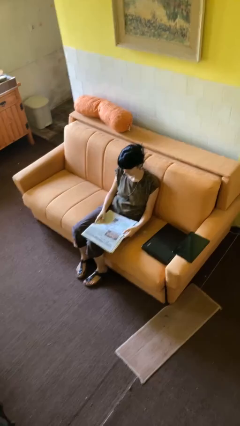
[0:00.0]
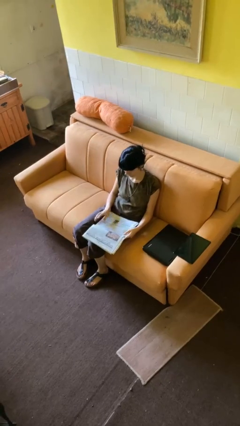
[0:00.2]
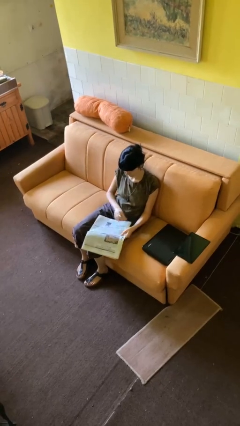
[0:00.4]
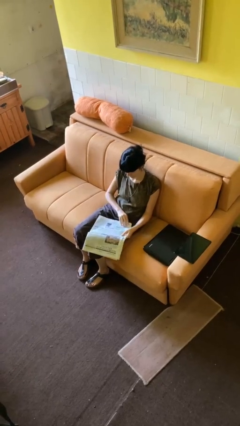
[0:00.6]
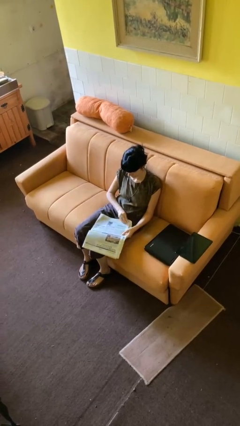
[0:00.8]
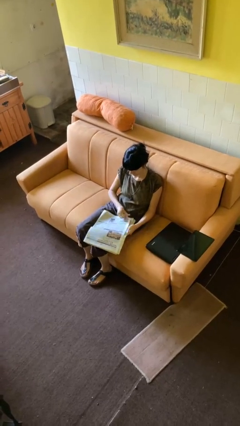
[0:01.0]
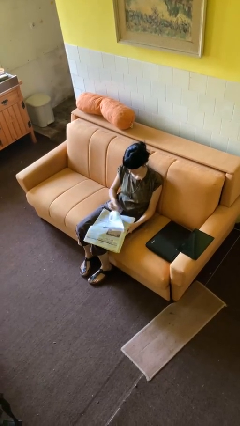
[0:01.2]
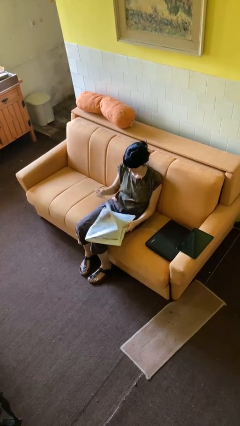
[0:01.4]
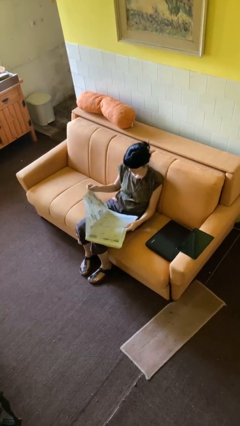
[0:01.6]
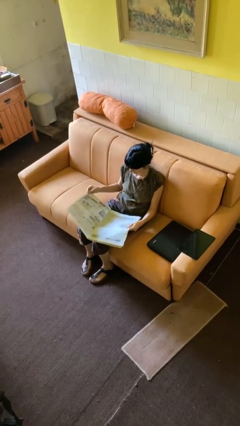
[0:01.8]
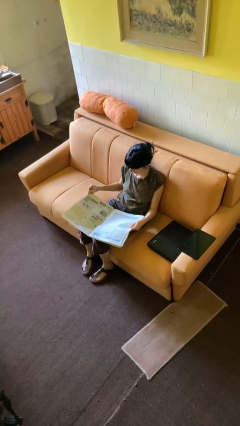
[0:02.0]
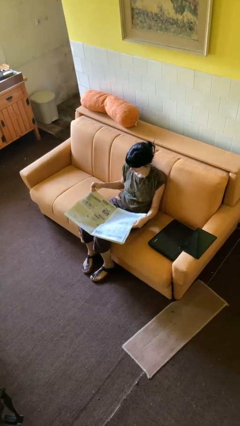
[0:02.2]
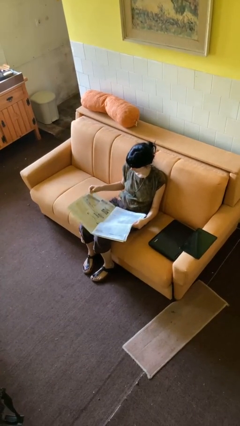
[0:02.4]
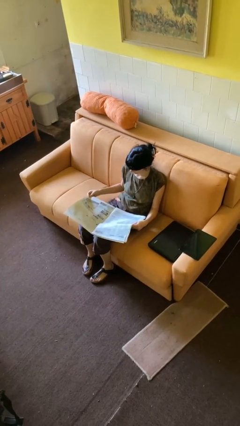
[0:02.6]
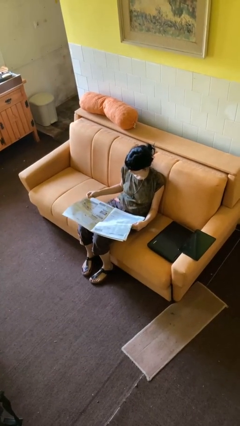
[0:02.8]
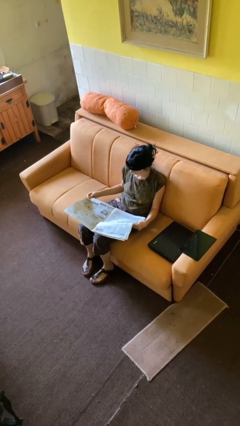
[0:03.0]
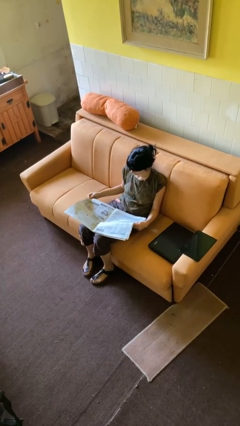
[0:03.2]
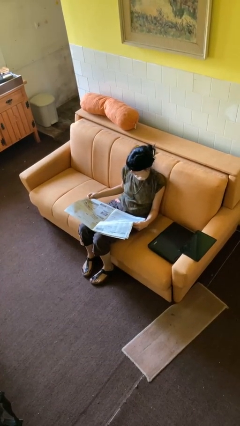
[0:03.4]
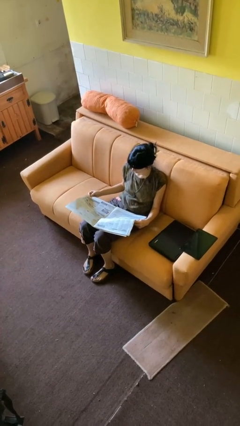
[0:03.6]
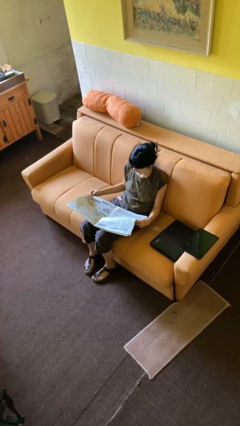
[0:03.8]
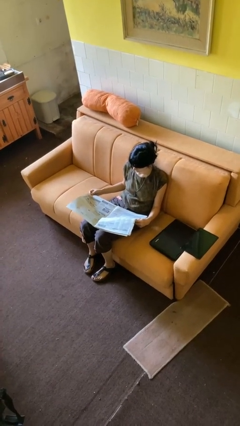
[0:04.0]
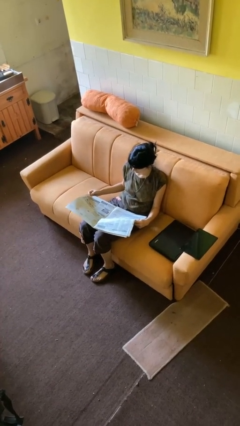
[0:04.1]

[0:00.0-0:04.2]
person reads newspaper

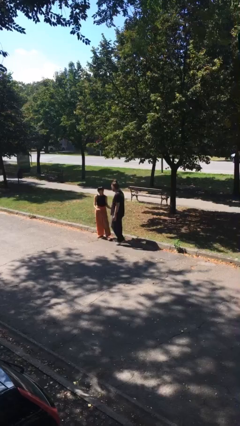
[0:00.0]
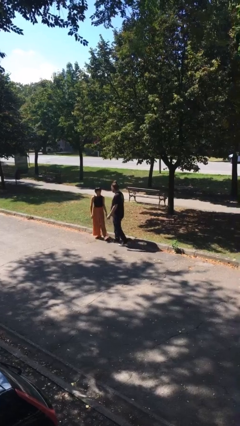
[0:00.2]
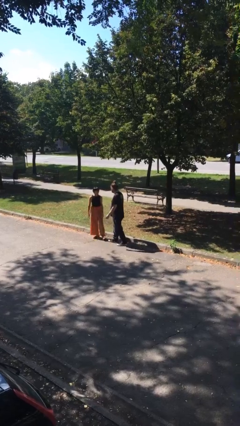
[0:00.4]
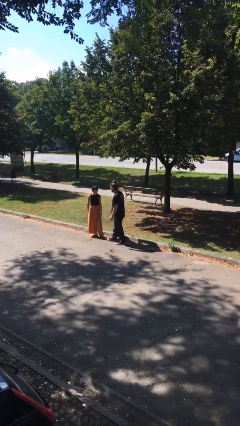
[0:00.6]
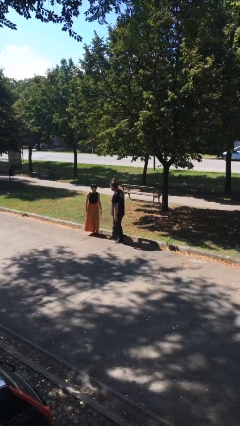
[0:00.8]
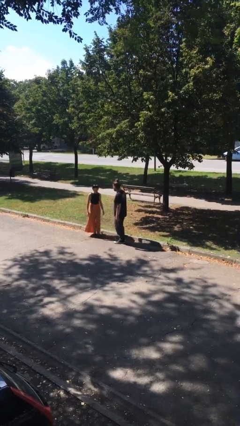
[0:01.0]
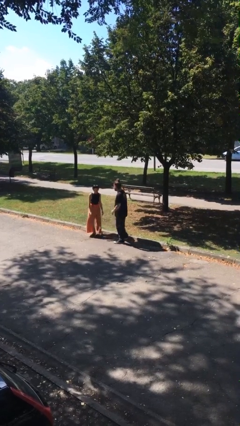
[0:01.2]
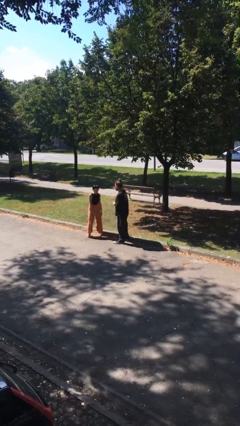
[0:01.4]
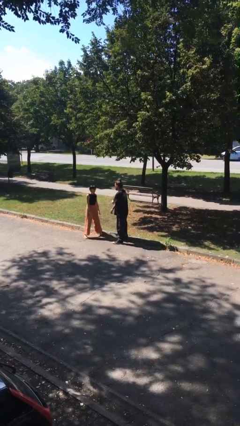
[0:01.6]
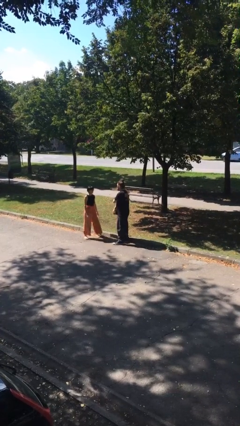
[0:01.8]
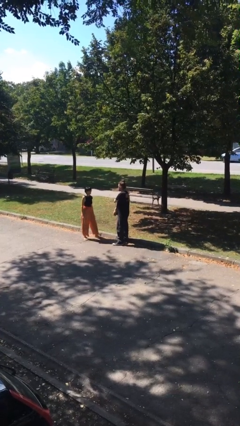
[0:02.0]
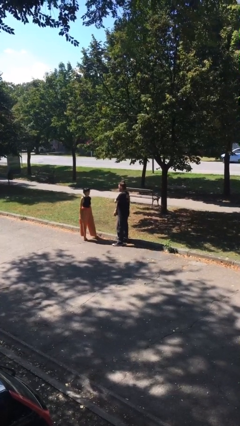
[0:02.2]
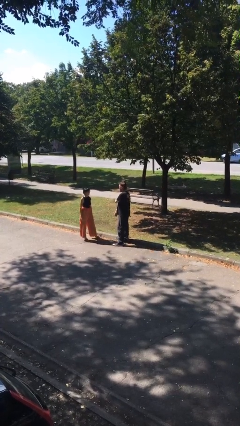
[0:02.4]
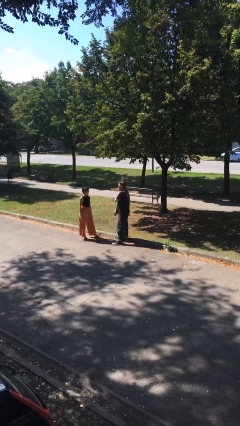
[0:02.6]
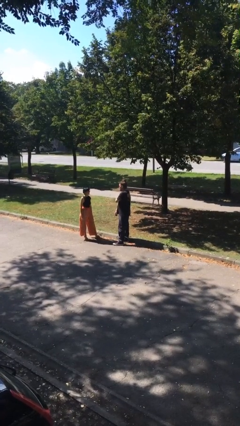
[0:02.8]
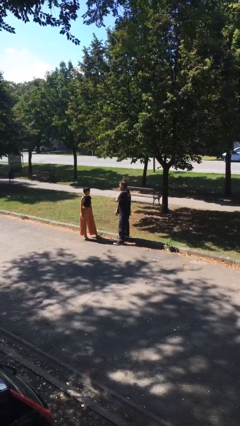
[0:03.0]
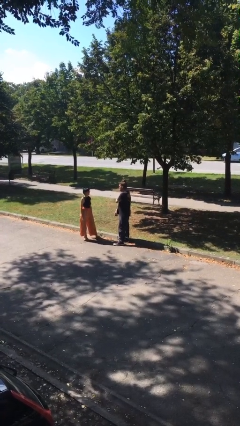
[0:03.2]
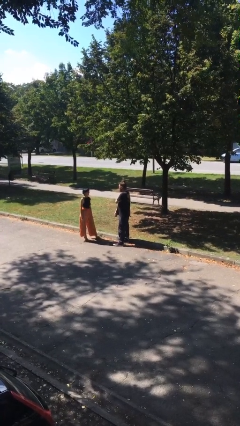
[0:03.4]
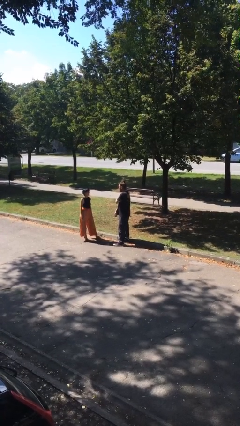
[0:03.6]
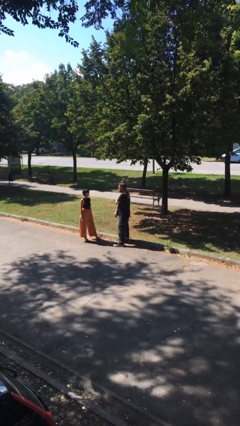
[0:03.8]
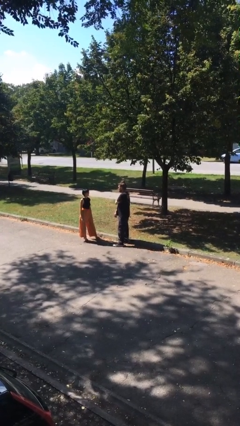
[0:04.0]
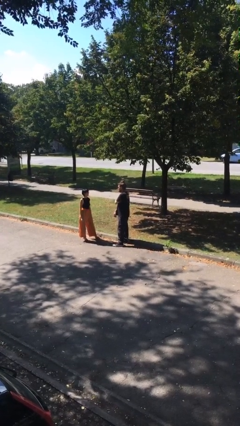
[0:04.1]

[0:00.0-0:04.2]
person talks to person

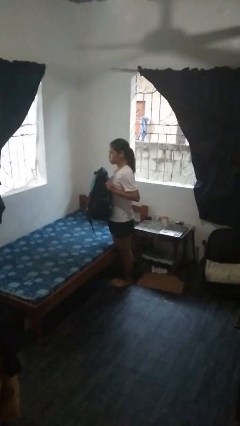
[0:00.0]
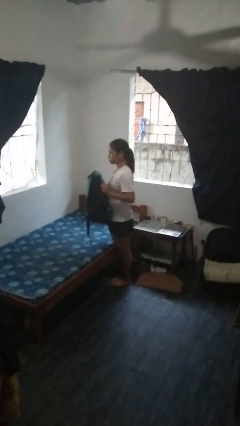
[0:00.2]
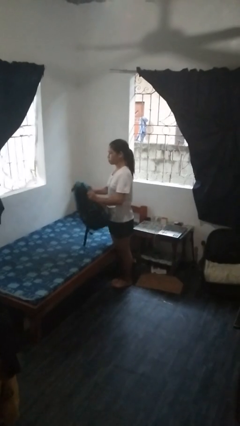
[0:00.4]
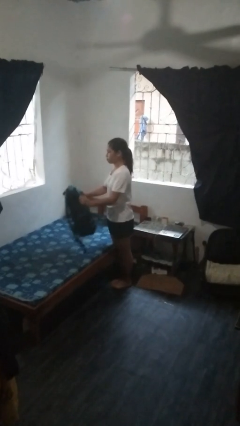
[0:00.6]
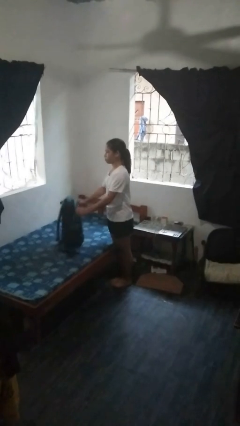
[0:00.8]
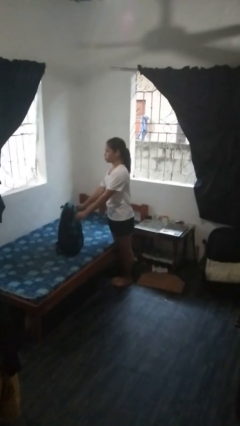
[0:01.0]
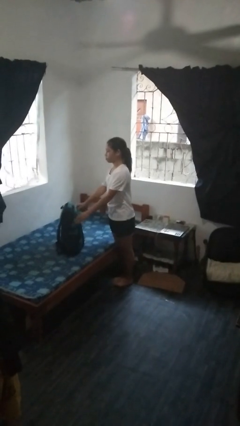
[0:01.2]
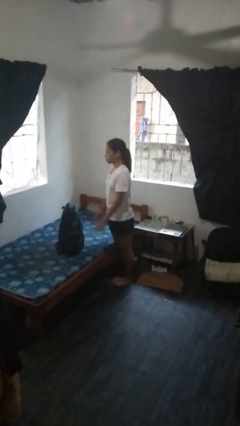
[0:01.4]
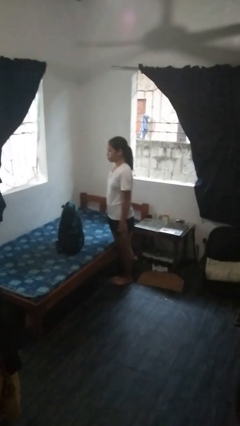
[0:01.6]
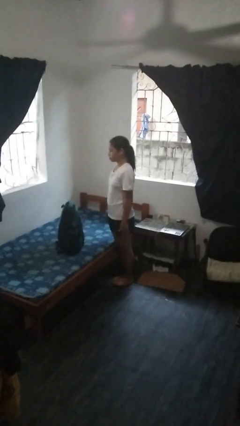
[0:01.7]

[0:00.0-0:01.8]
person puts down object on bed

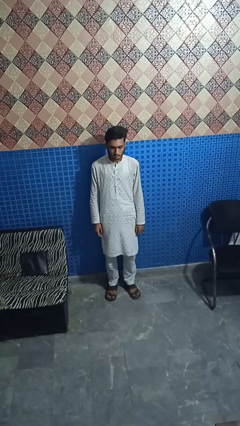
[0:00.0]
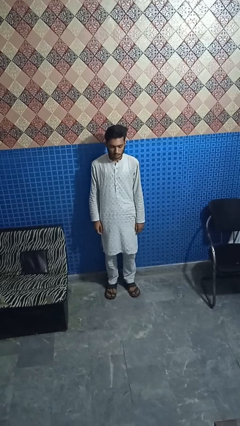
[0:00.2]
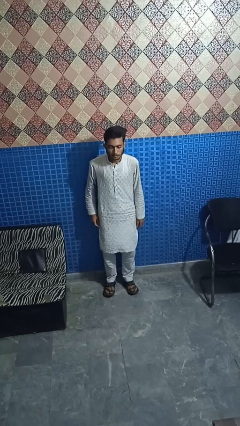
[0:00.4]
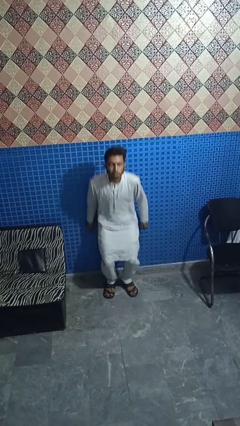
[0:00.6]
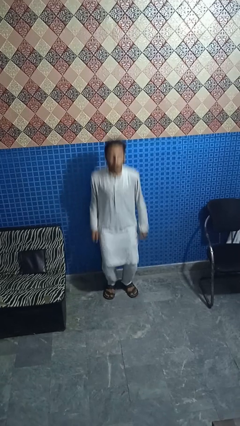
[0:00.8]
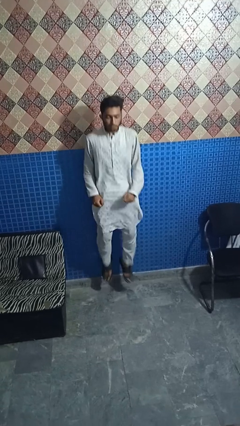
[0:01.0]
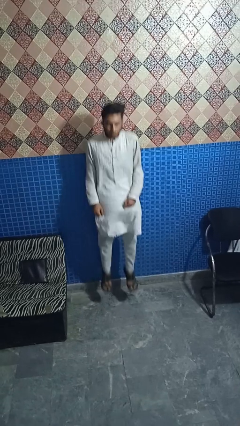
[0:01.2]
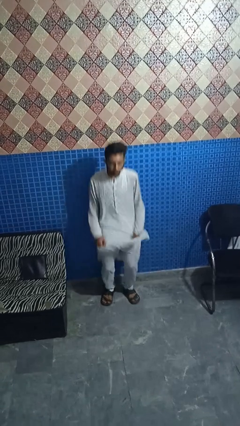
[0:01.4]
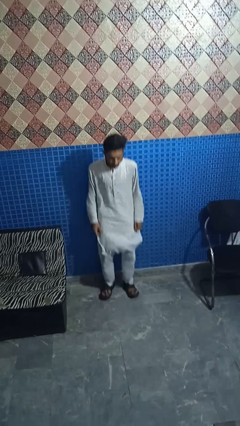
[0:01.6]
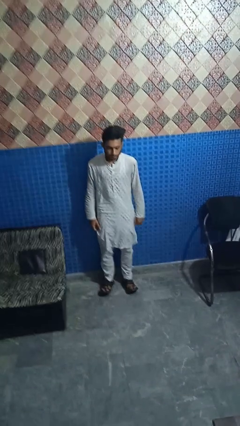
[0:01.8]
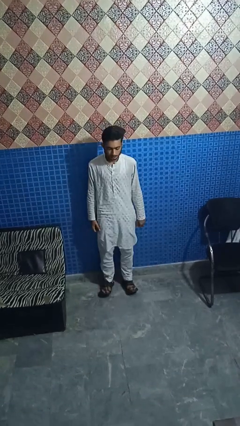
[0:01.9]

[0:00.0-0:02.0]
person jumps

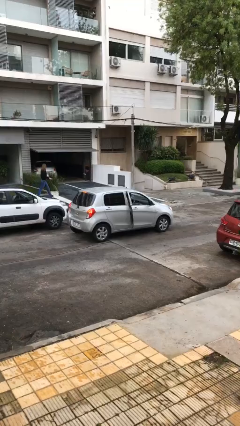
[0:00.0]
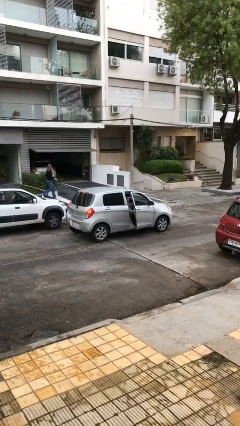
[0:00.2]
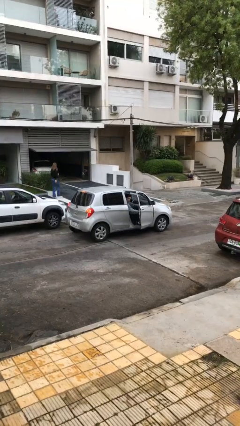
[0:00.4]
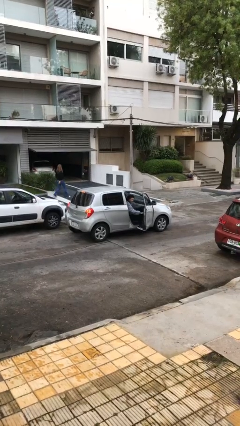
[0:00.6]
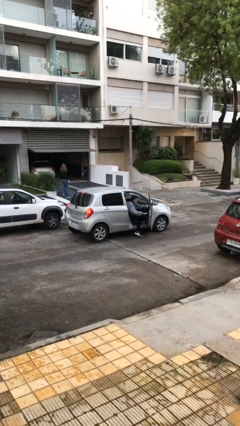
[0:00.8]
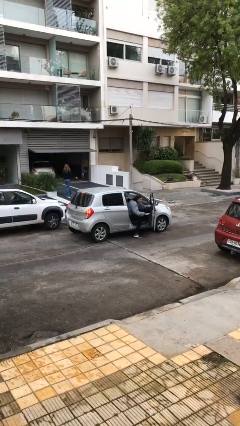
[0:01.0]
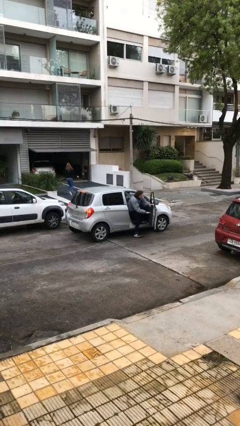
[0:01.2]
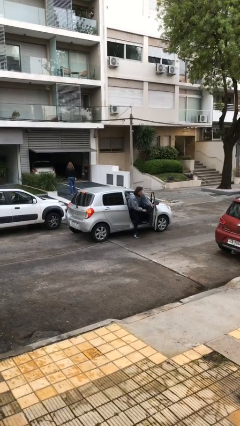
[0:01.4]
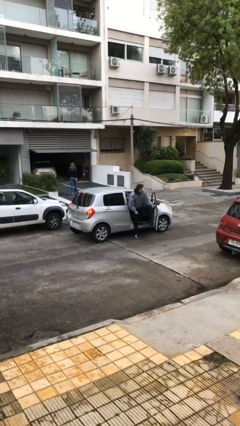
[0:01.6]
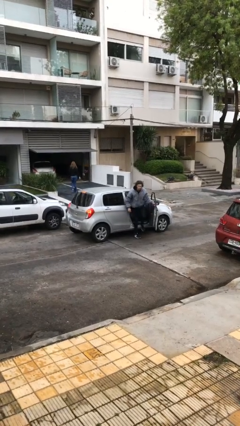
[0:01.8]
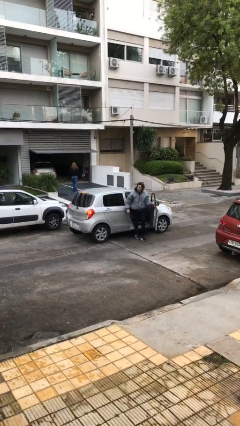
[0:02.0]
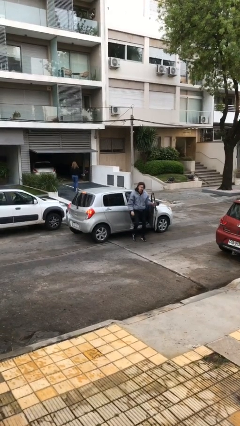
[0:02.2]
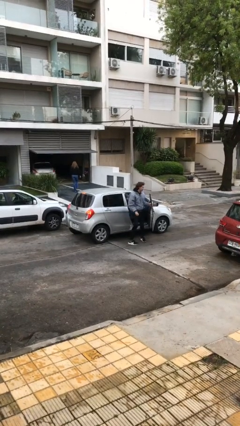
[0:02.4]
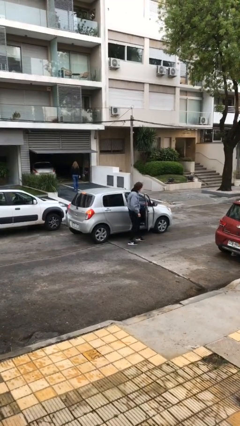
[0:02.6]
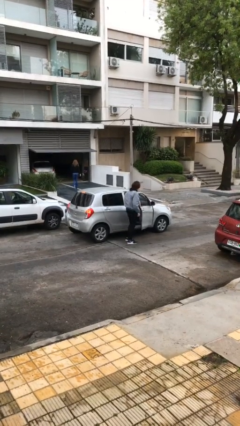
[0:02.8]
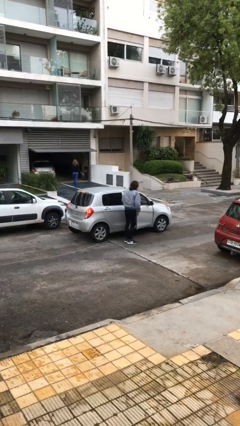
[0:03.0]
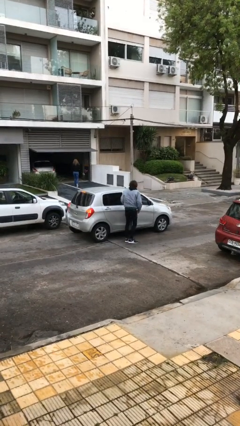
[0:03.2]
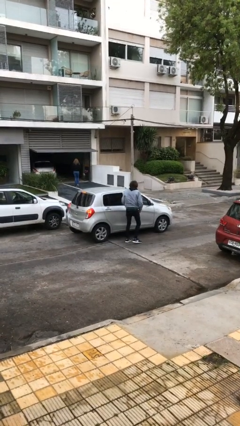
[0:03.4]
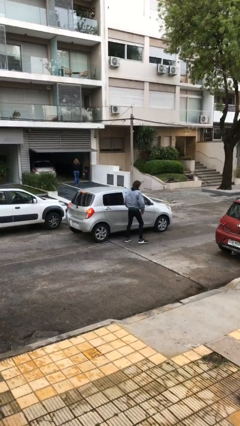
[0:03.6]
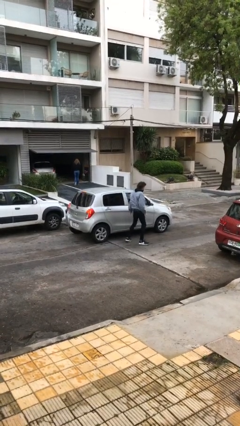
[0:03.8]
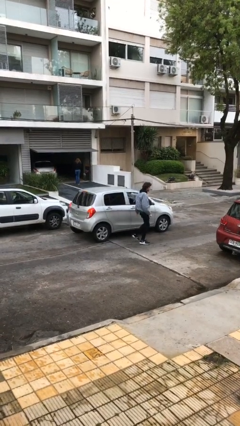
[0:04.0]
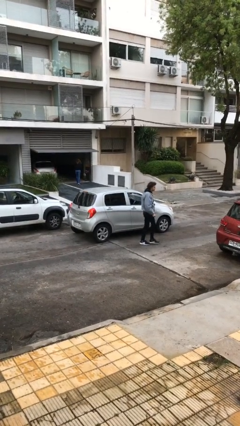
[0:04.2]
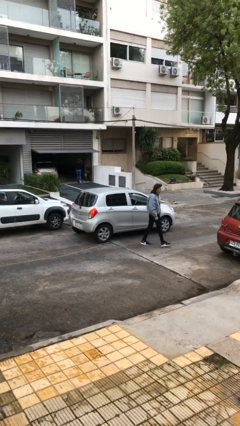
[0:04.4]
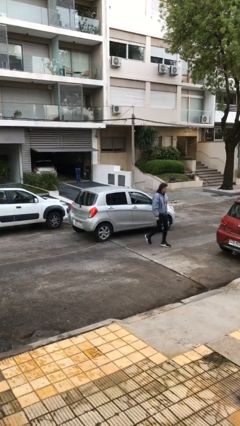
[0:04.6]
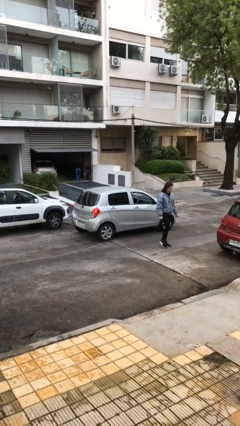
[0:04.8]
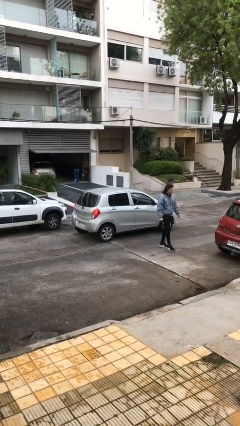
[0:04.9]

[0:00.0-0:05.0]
car drops off person
